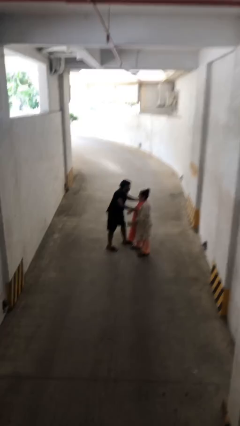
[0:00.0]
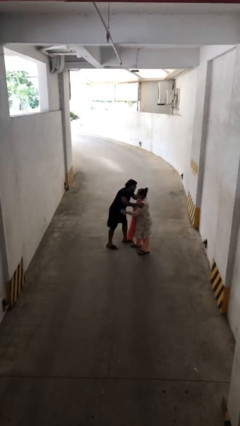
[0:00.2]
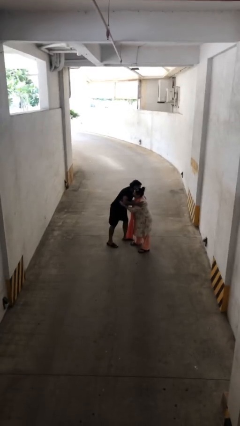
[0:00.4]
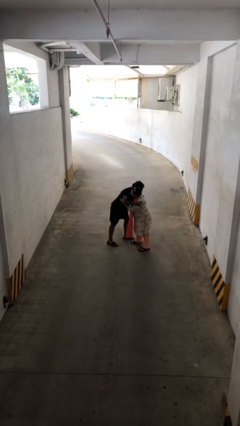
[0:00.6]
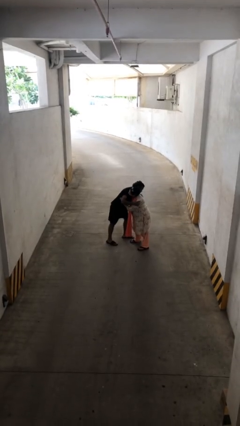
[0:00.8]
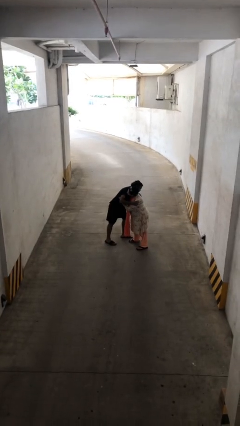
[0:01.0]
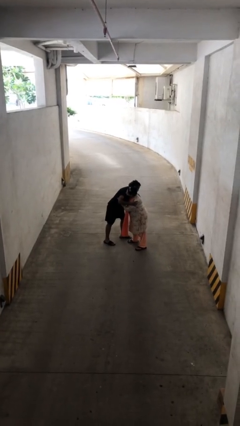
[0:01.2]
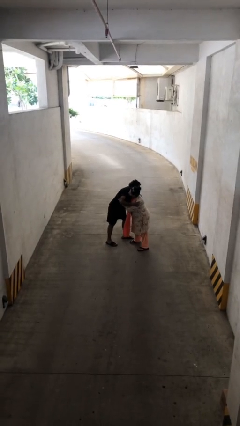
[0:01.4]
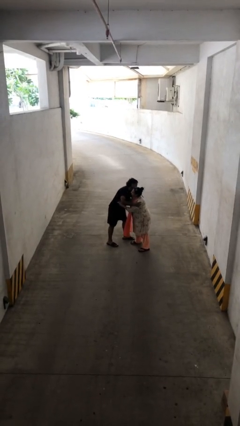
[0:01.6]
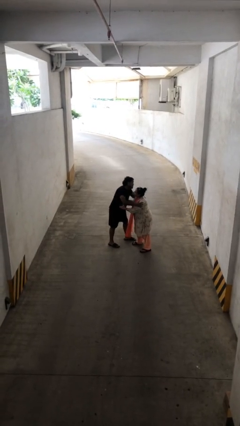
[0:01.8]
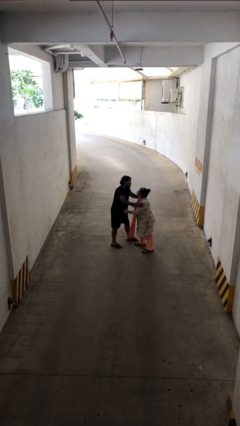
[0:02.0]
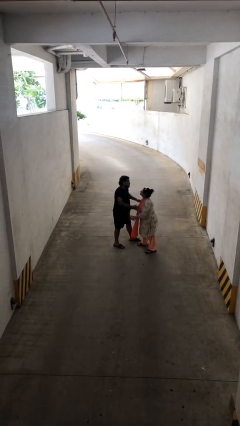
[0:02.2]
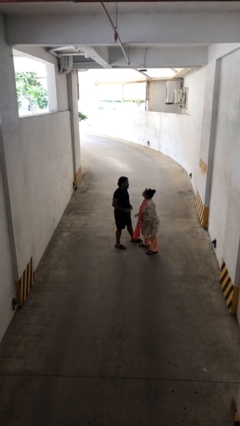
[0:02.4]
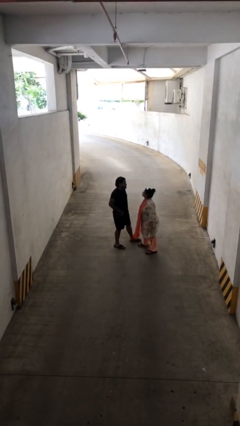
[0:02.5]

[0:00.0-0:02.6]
person embraces person

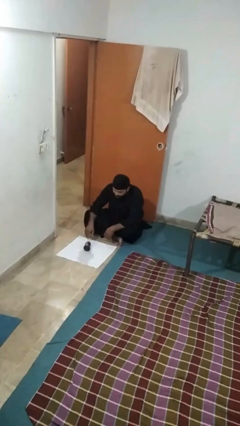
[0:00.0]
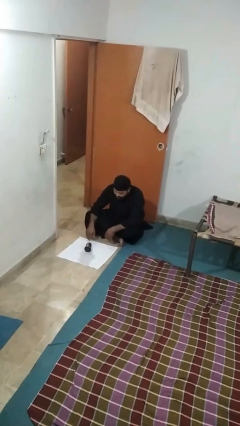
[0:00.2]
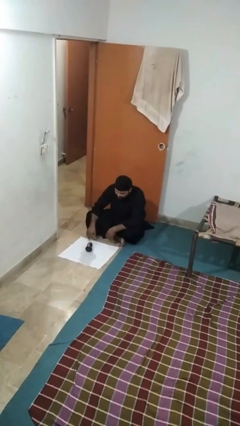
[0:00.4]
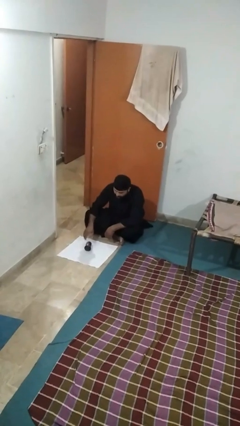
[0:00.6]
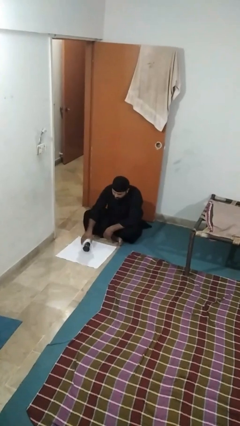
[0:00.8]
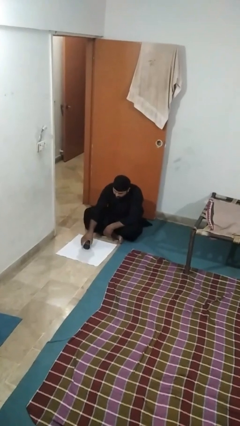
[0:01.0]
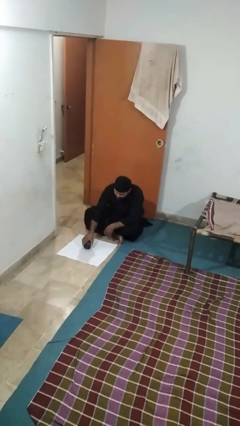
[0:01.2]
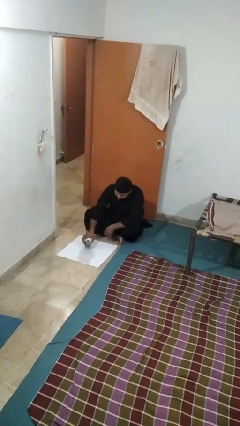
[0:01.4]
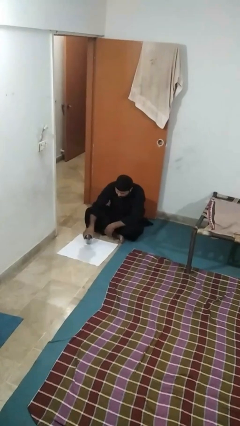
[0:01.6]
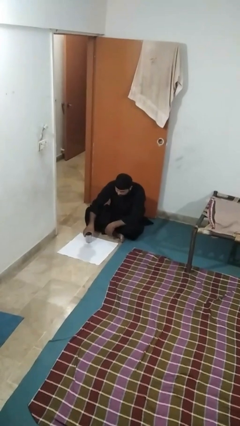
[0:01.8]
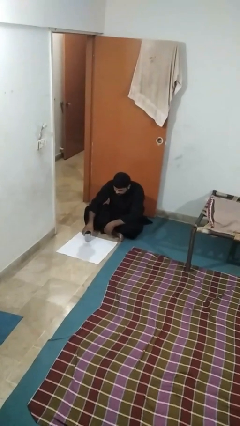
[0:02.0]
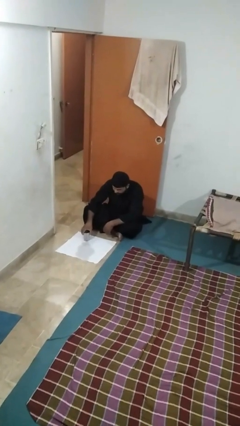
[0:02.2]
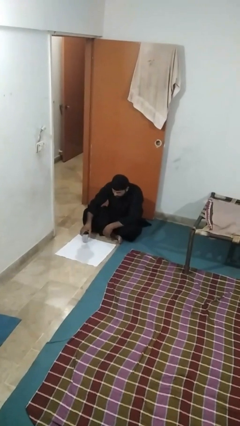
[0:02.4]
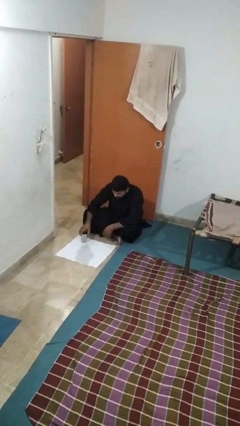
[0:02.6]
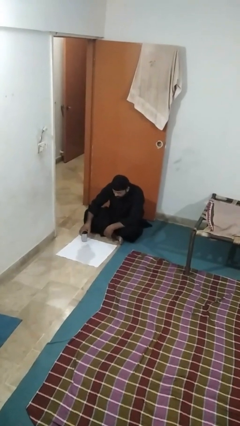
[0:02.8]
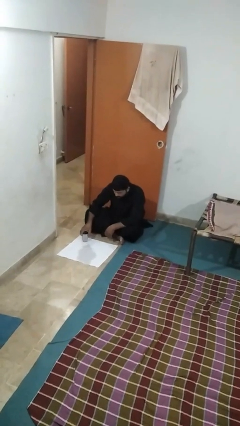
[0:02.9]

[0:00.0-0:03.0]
person sets upright glass

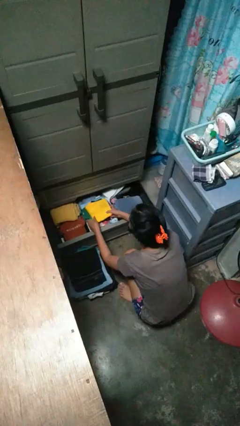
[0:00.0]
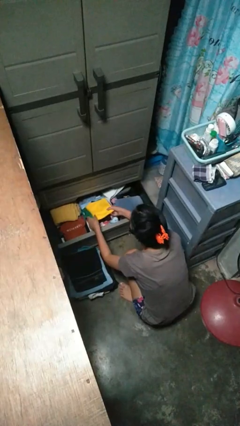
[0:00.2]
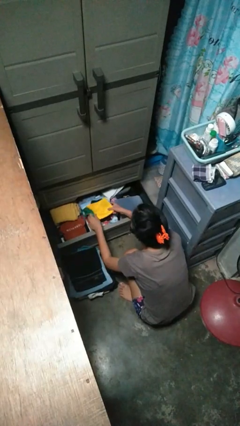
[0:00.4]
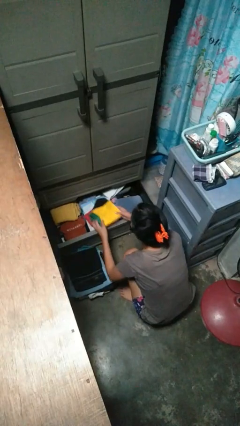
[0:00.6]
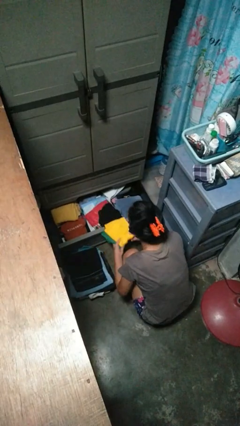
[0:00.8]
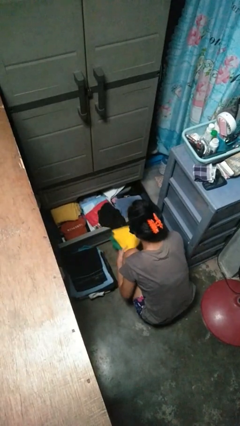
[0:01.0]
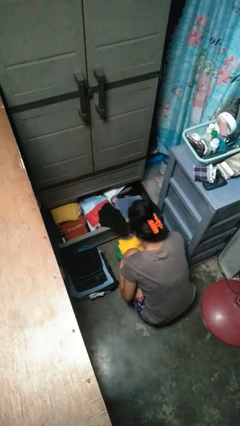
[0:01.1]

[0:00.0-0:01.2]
person takes clothes from dresser

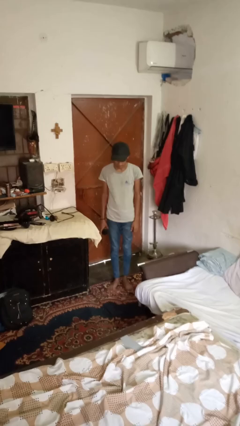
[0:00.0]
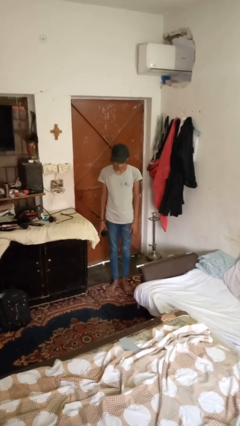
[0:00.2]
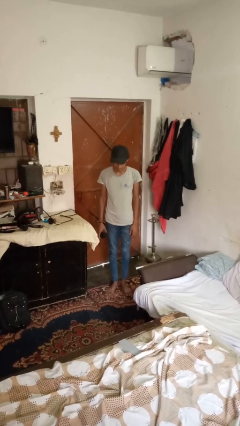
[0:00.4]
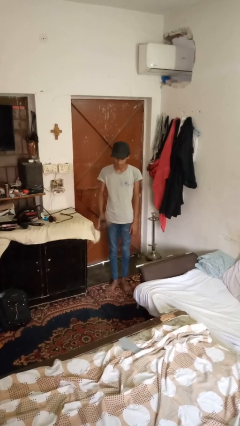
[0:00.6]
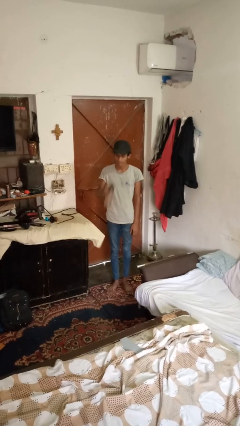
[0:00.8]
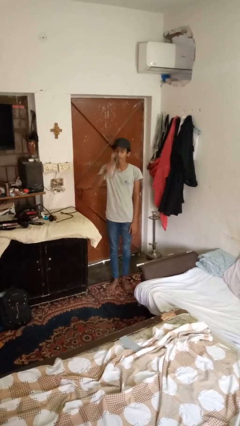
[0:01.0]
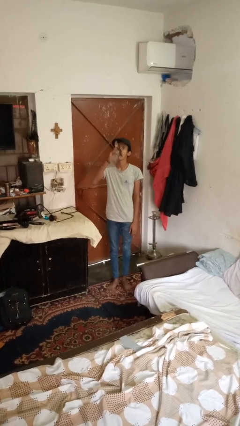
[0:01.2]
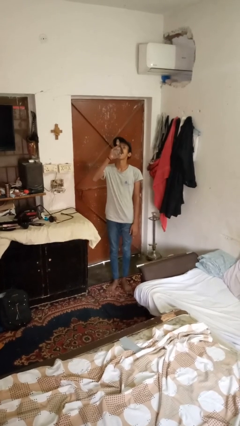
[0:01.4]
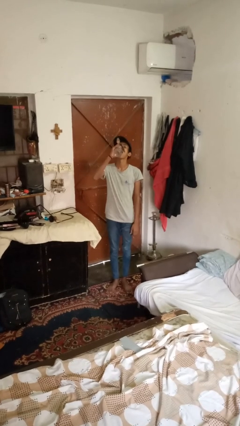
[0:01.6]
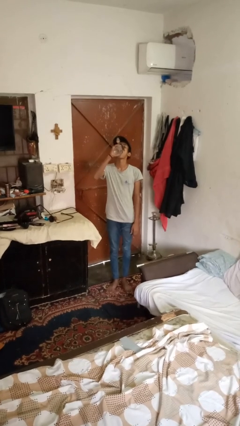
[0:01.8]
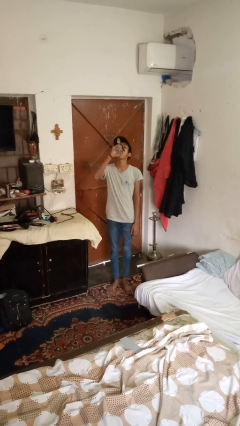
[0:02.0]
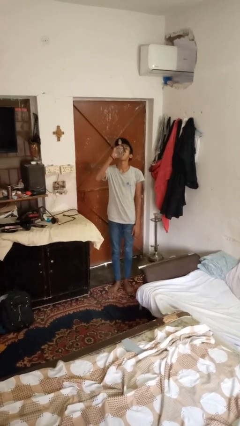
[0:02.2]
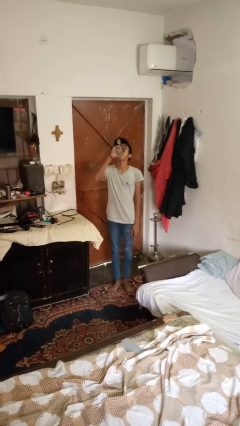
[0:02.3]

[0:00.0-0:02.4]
person drinks from bottle

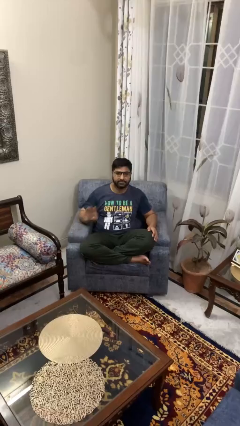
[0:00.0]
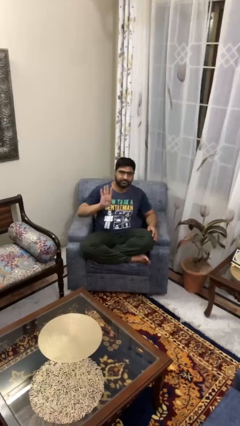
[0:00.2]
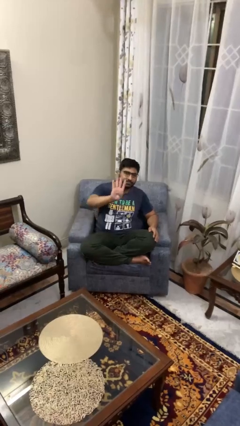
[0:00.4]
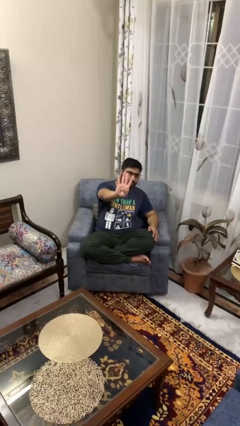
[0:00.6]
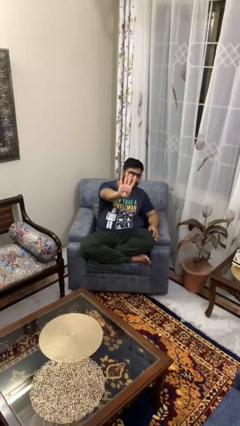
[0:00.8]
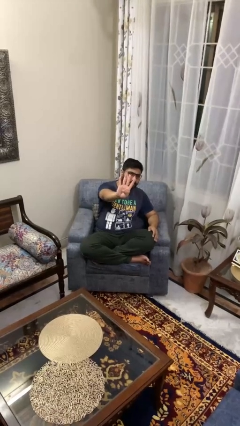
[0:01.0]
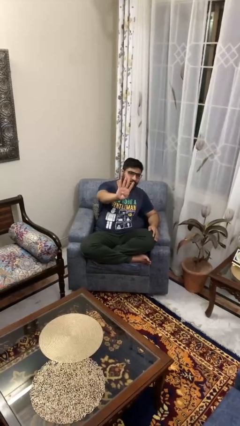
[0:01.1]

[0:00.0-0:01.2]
person gestures number four

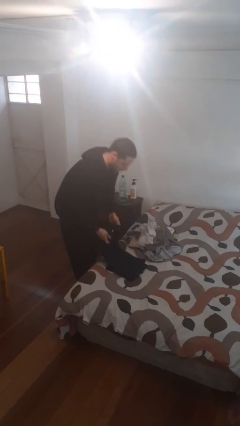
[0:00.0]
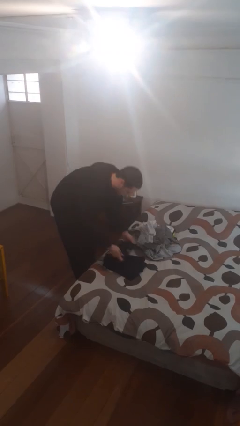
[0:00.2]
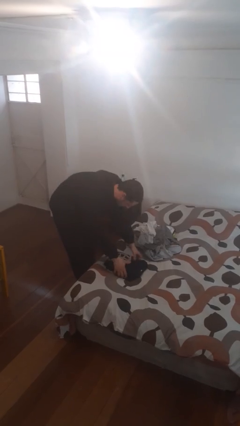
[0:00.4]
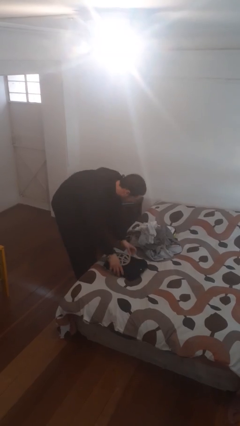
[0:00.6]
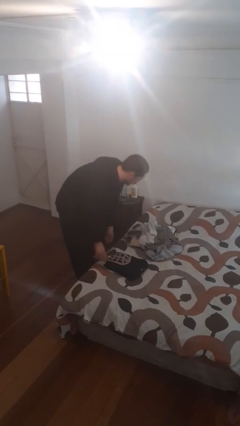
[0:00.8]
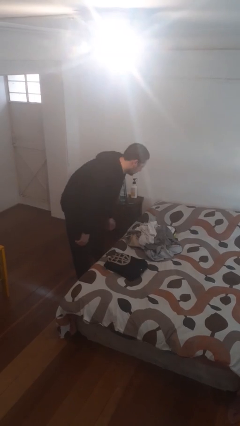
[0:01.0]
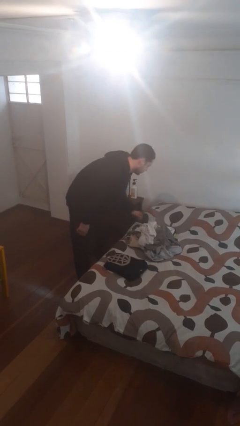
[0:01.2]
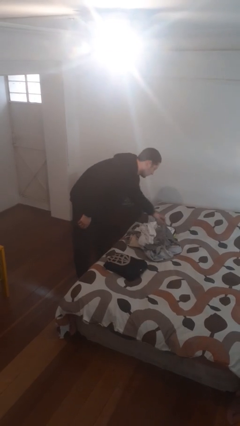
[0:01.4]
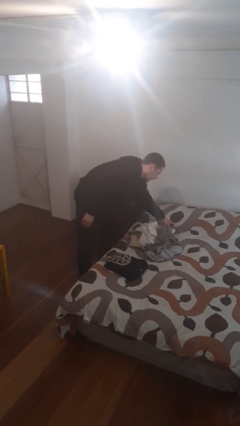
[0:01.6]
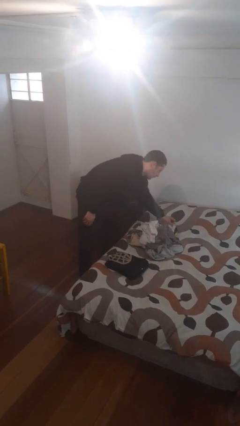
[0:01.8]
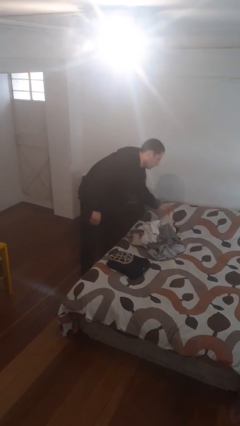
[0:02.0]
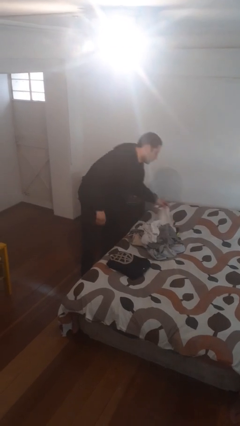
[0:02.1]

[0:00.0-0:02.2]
person folds shirt

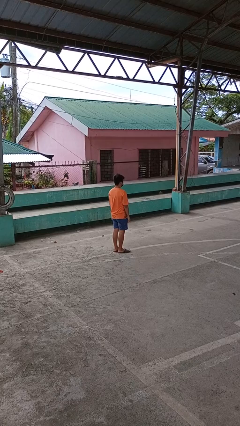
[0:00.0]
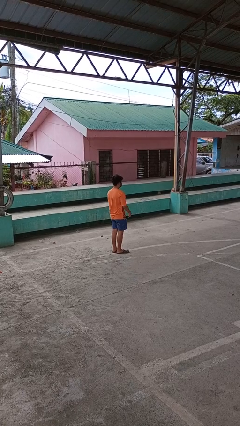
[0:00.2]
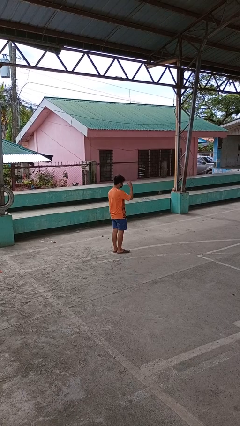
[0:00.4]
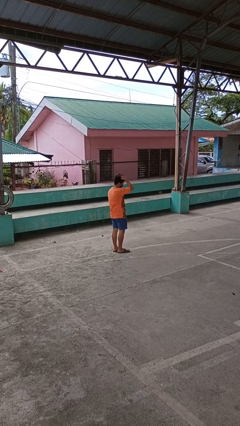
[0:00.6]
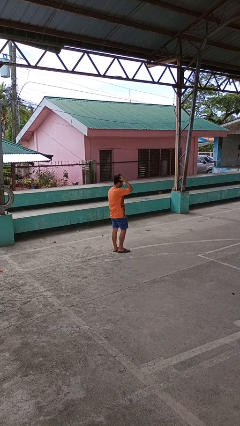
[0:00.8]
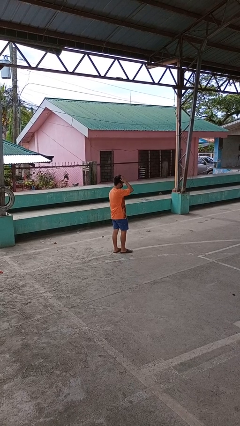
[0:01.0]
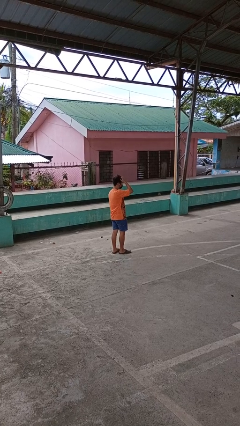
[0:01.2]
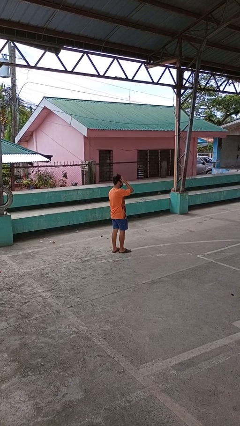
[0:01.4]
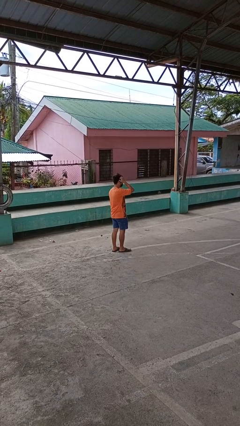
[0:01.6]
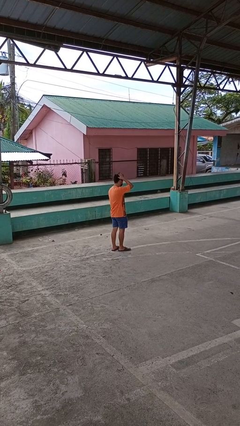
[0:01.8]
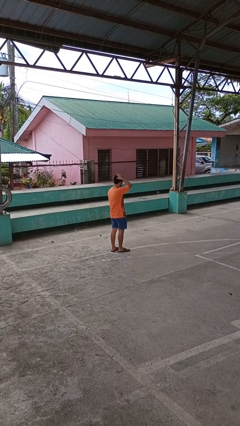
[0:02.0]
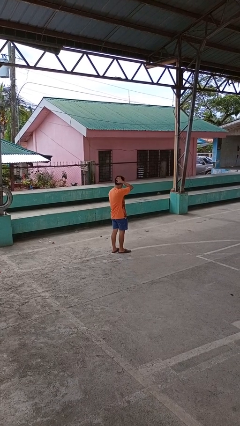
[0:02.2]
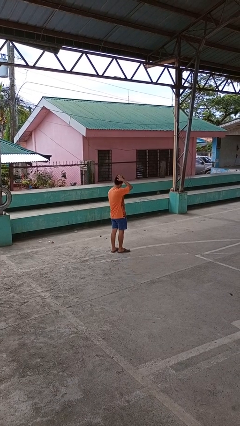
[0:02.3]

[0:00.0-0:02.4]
person scratches face

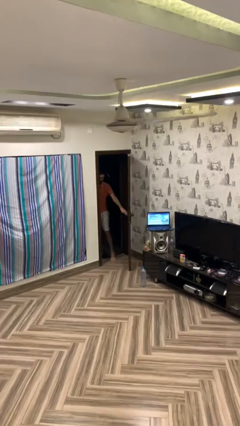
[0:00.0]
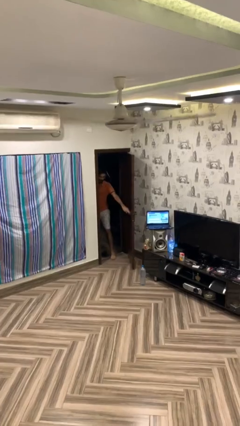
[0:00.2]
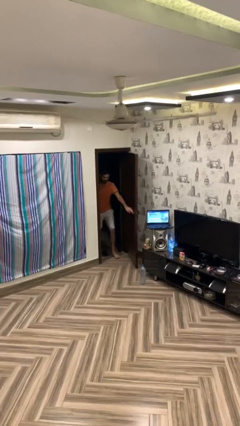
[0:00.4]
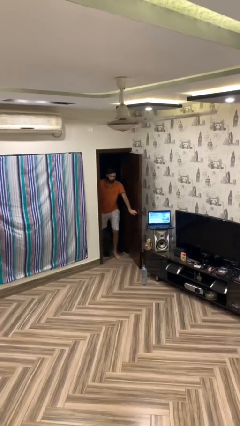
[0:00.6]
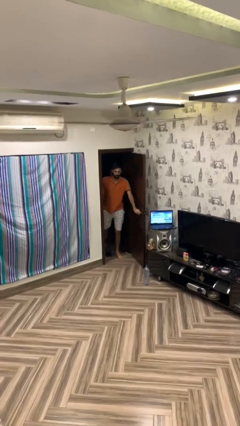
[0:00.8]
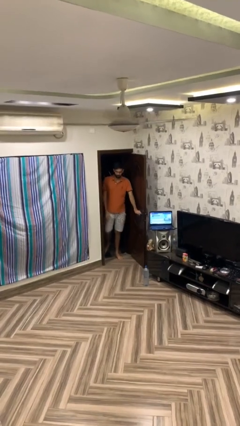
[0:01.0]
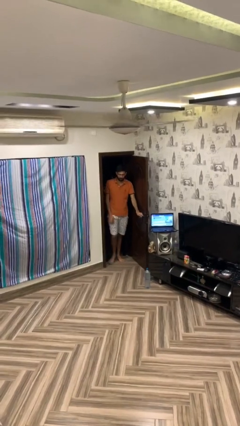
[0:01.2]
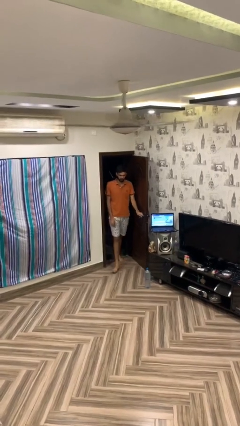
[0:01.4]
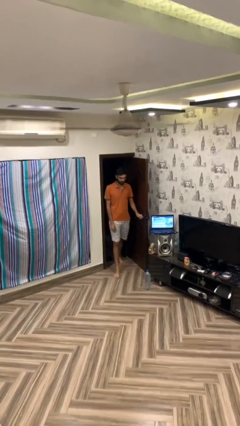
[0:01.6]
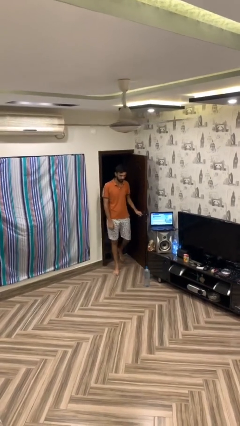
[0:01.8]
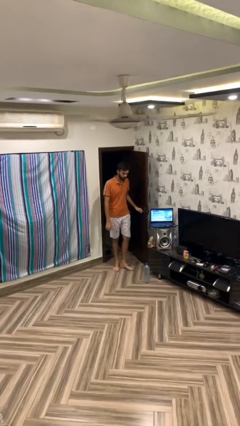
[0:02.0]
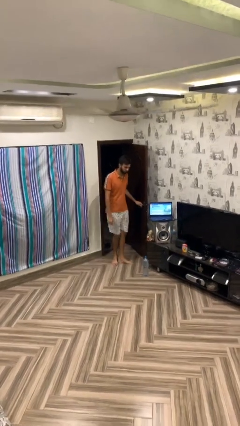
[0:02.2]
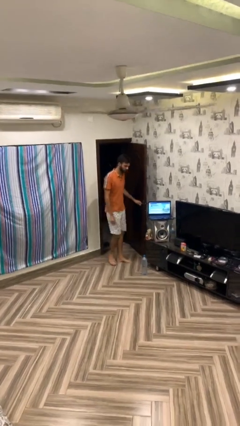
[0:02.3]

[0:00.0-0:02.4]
person enters scene through structure

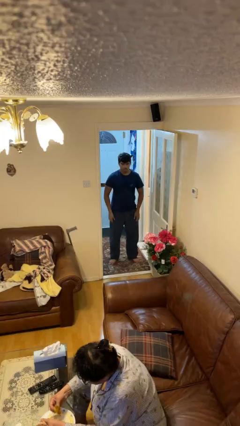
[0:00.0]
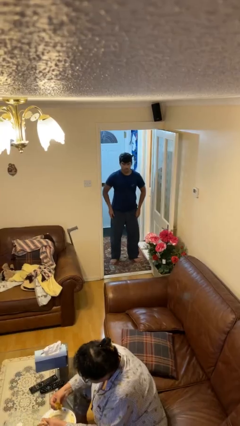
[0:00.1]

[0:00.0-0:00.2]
person puts hands in back pockets
